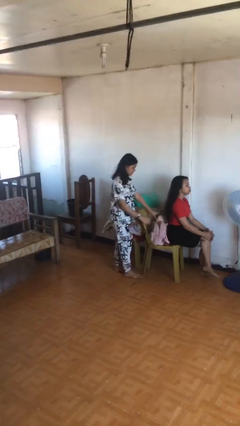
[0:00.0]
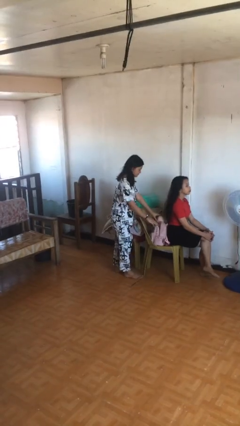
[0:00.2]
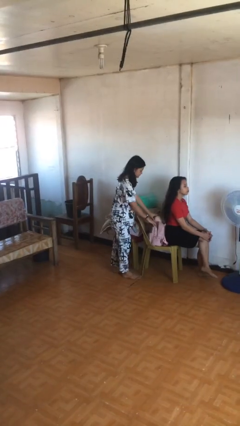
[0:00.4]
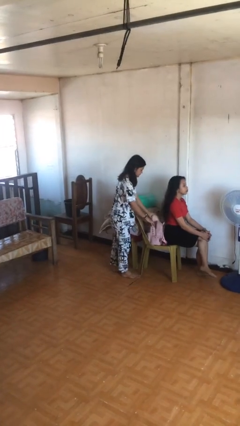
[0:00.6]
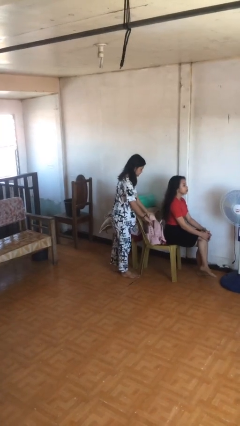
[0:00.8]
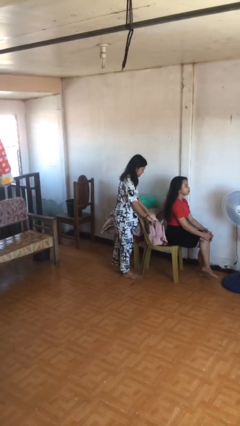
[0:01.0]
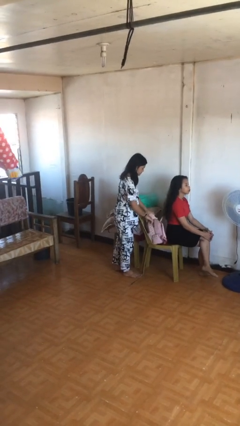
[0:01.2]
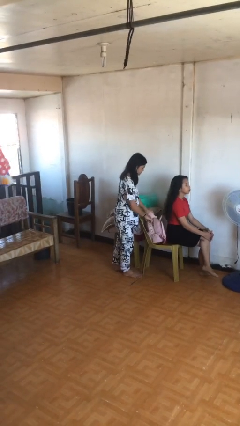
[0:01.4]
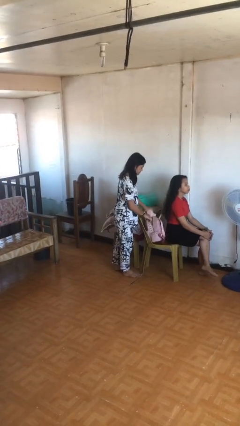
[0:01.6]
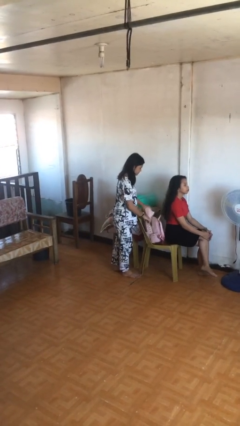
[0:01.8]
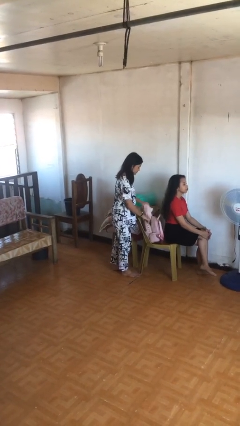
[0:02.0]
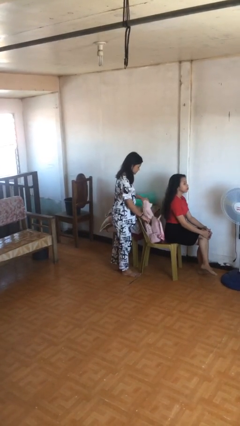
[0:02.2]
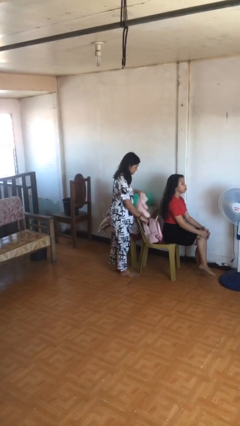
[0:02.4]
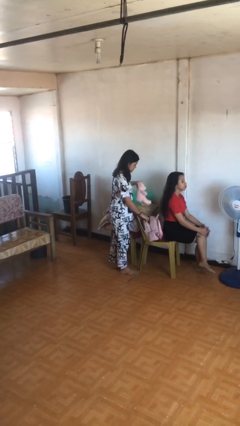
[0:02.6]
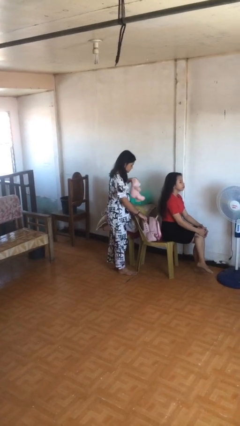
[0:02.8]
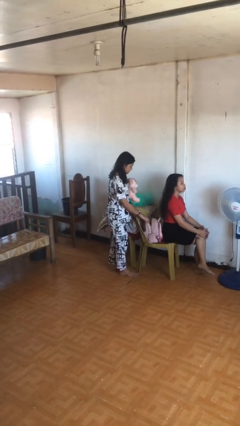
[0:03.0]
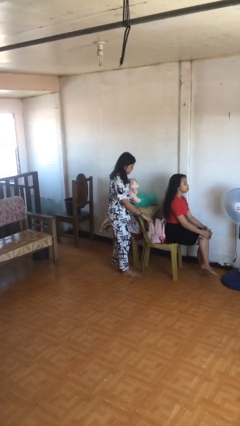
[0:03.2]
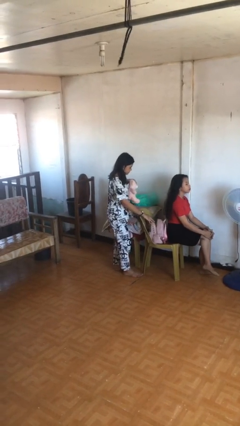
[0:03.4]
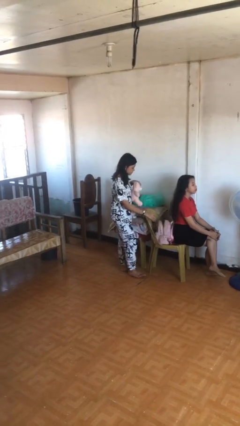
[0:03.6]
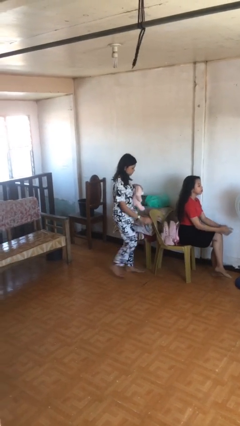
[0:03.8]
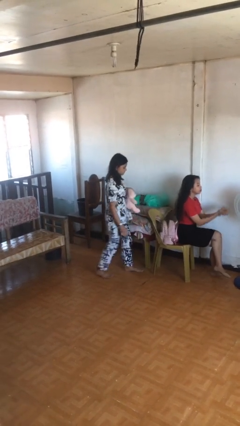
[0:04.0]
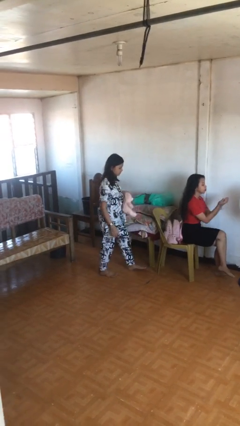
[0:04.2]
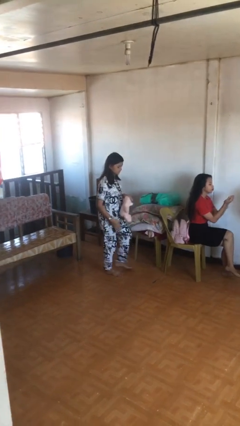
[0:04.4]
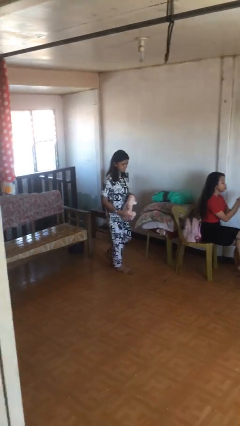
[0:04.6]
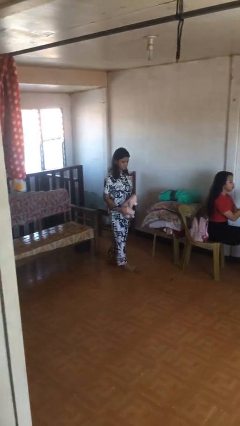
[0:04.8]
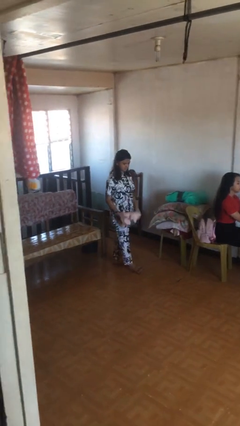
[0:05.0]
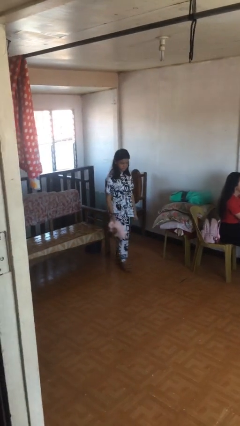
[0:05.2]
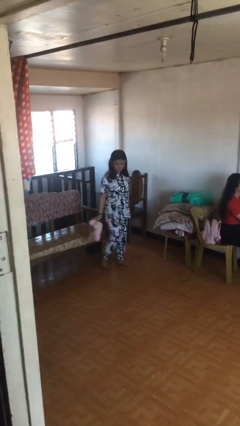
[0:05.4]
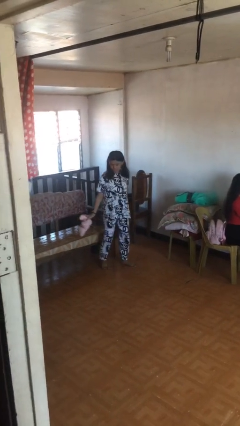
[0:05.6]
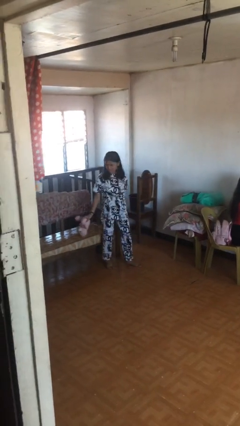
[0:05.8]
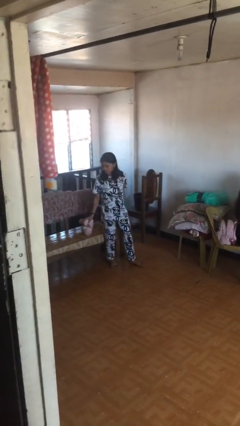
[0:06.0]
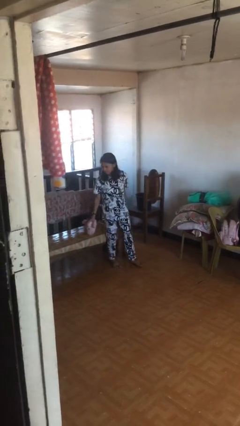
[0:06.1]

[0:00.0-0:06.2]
person steals object from person

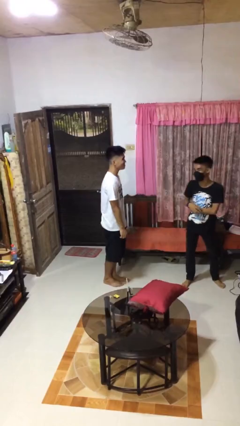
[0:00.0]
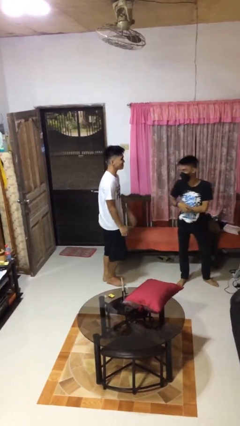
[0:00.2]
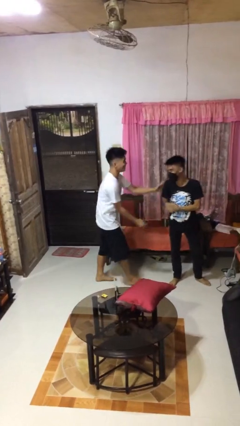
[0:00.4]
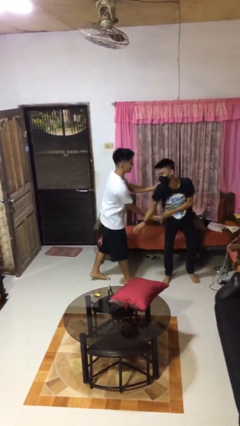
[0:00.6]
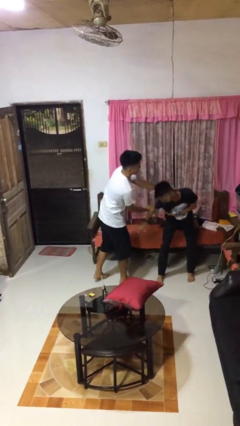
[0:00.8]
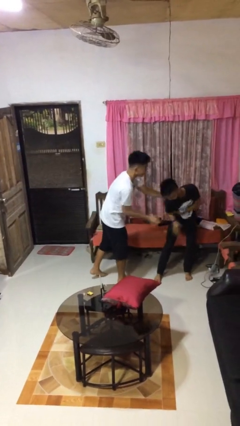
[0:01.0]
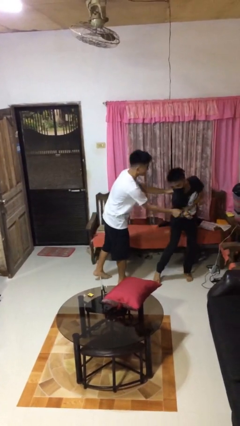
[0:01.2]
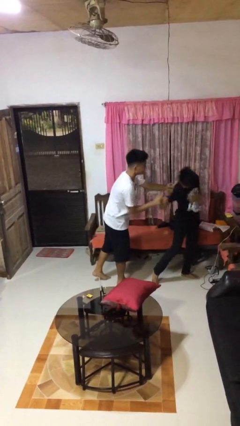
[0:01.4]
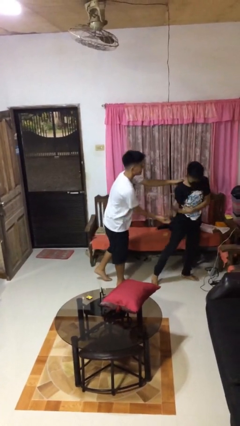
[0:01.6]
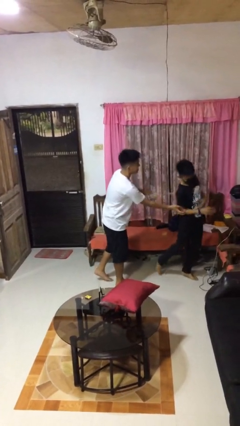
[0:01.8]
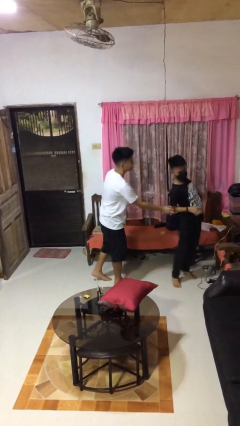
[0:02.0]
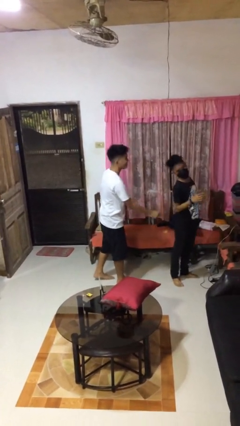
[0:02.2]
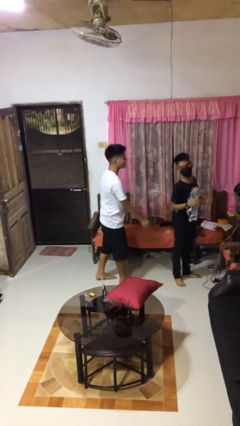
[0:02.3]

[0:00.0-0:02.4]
person tickles person

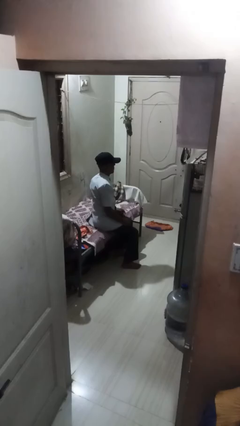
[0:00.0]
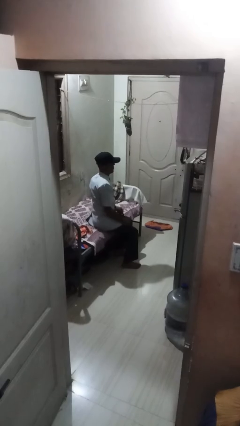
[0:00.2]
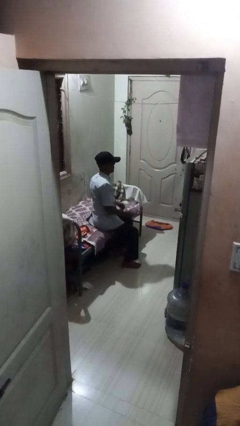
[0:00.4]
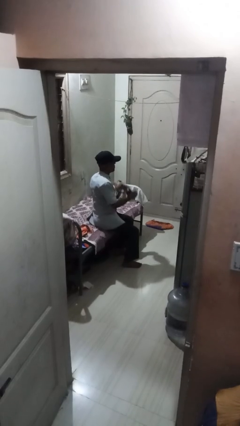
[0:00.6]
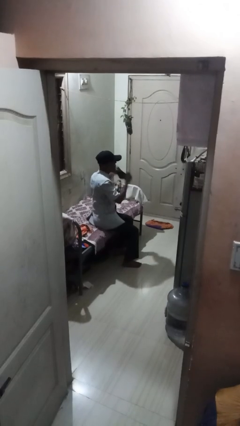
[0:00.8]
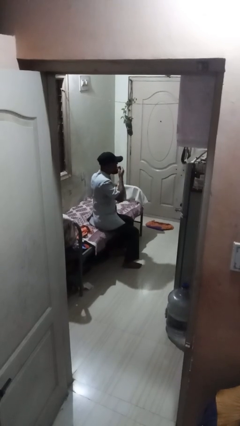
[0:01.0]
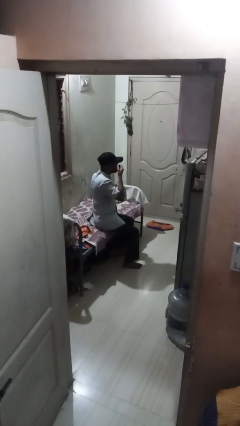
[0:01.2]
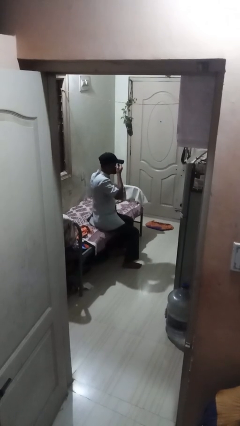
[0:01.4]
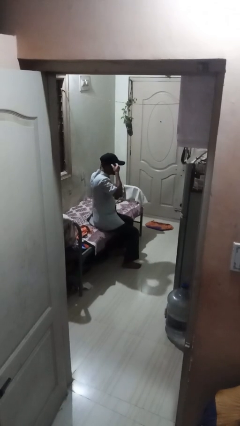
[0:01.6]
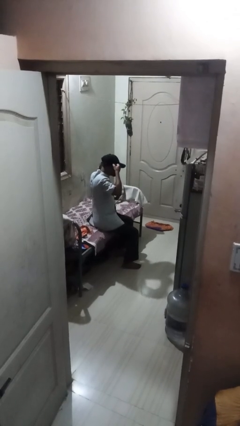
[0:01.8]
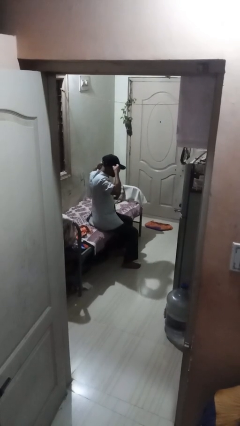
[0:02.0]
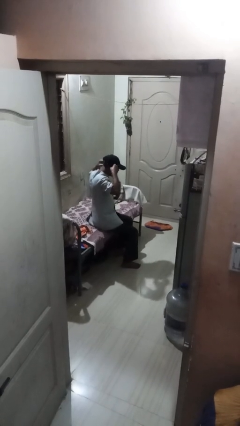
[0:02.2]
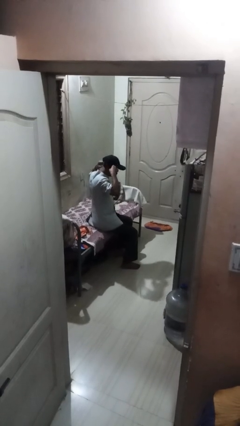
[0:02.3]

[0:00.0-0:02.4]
person puts on facemask

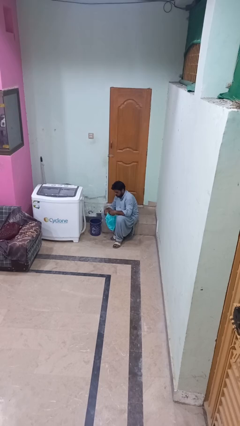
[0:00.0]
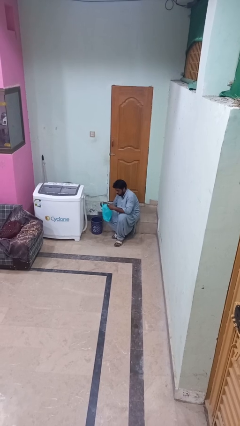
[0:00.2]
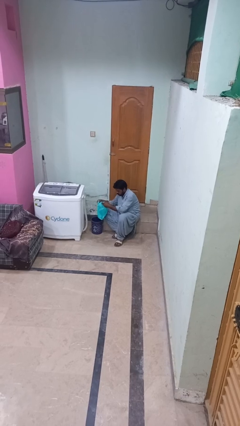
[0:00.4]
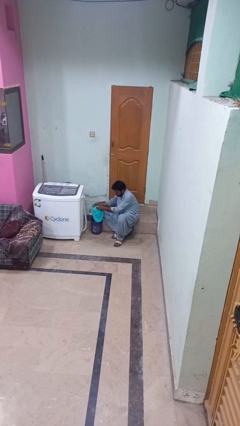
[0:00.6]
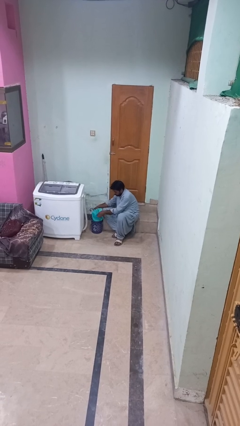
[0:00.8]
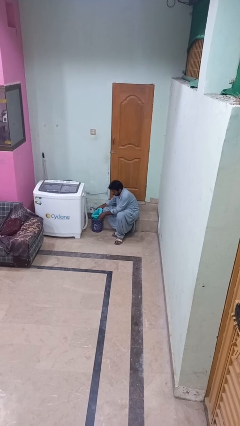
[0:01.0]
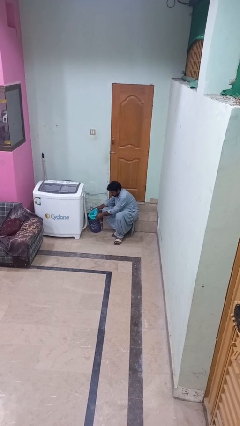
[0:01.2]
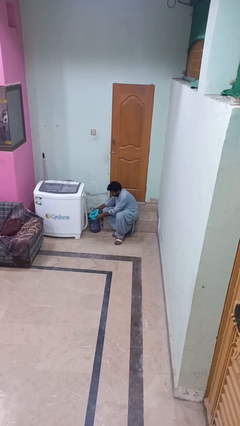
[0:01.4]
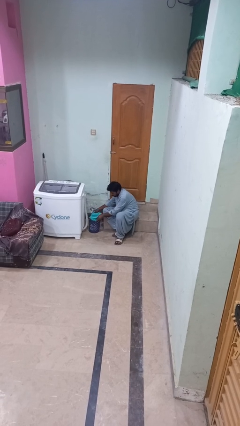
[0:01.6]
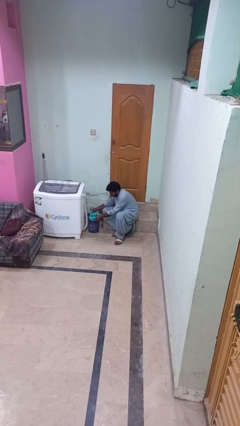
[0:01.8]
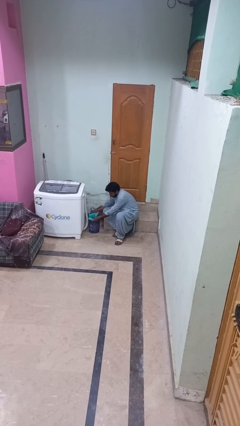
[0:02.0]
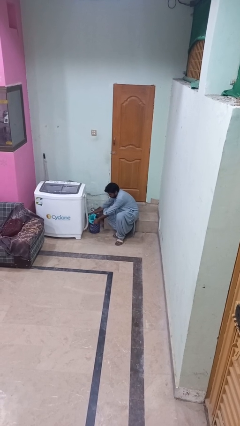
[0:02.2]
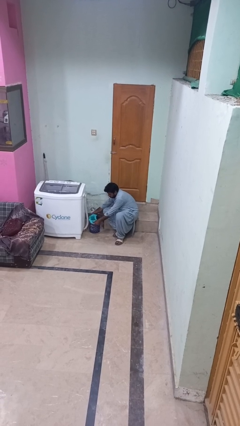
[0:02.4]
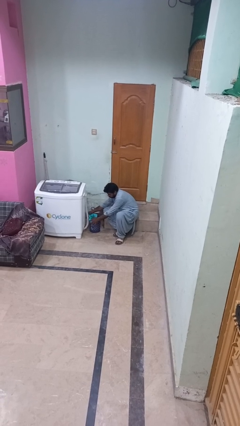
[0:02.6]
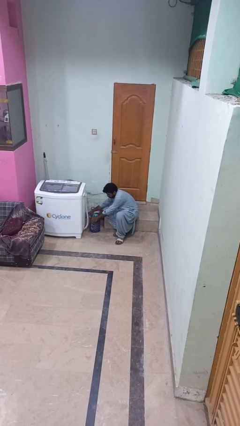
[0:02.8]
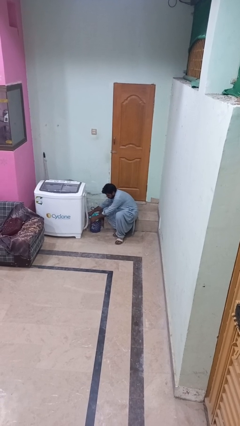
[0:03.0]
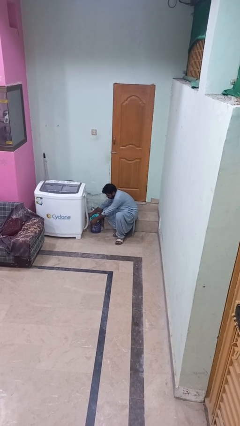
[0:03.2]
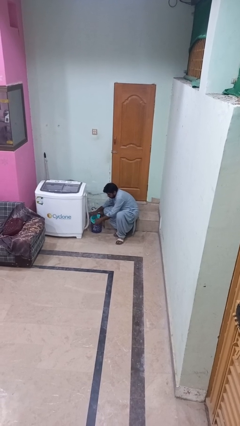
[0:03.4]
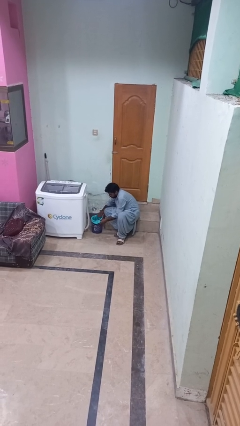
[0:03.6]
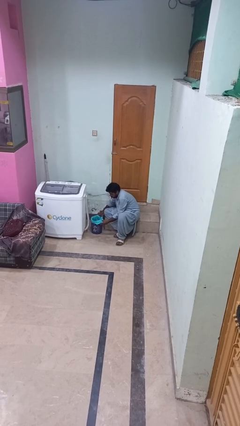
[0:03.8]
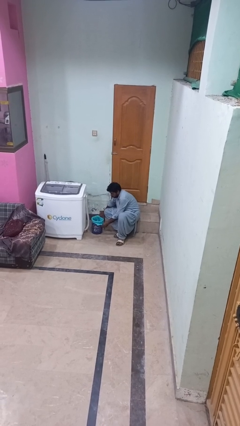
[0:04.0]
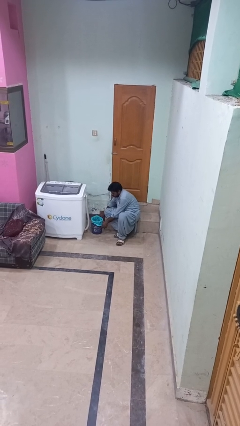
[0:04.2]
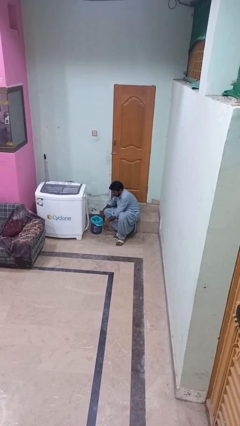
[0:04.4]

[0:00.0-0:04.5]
person inserts trashbag into trashcan

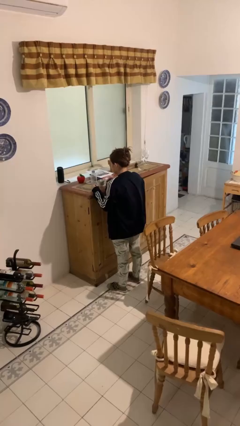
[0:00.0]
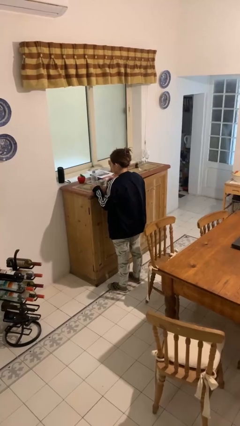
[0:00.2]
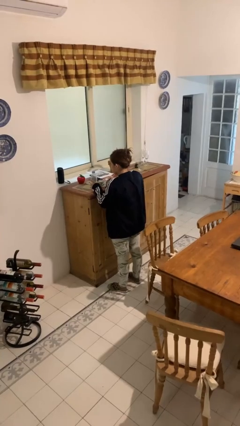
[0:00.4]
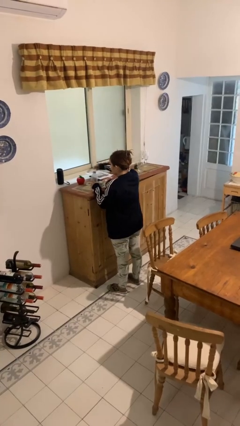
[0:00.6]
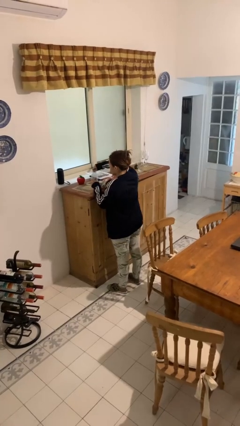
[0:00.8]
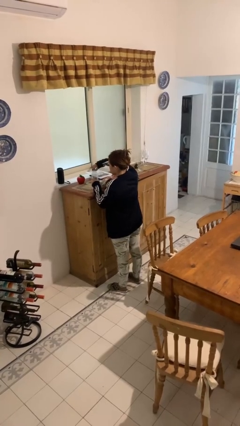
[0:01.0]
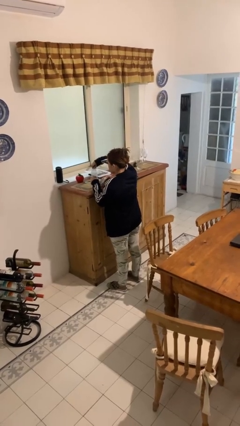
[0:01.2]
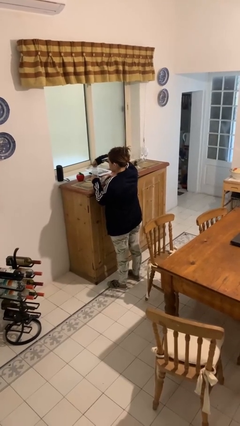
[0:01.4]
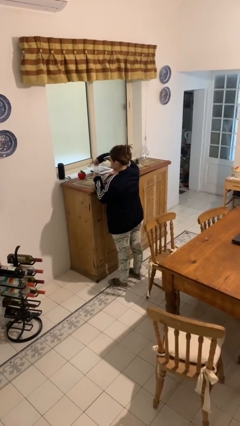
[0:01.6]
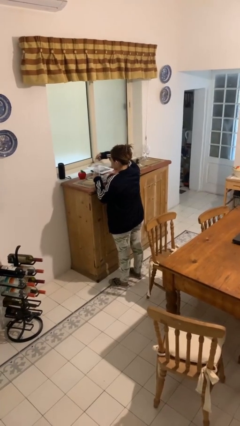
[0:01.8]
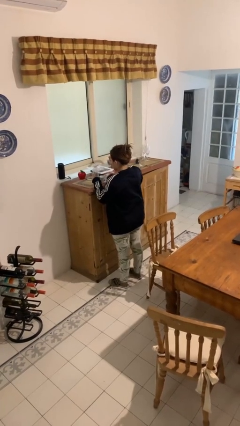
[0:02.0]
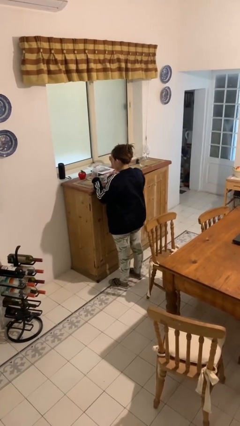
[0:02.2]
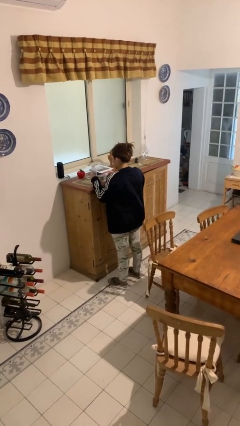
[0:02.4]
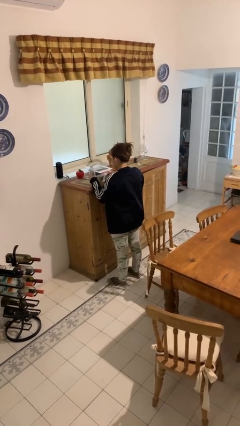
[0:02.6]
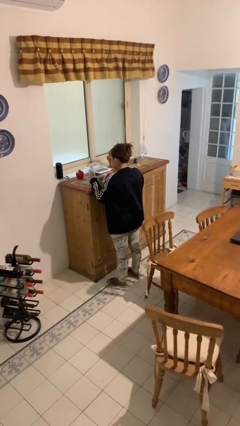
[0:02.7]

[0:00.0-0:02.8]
person unscrews lid from bottle
